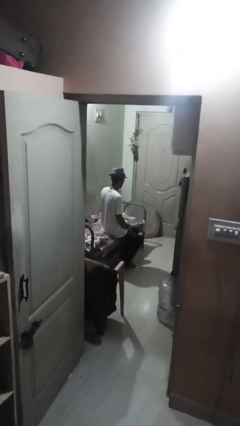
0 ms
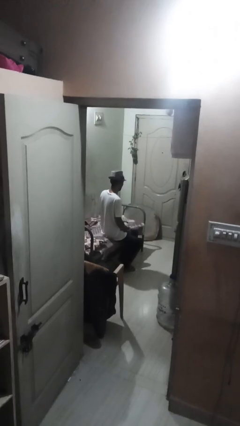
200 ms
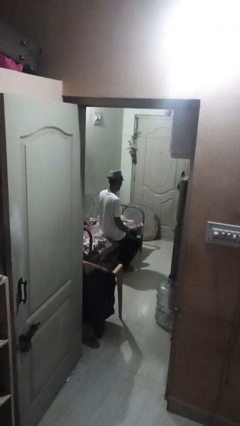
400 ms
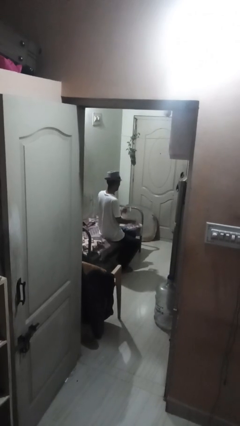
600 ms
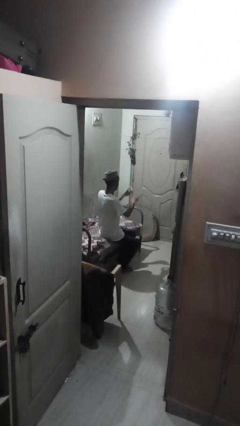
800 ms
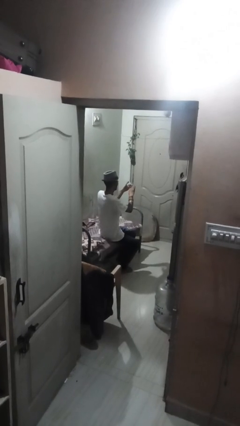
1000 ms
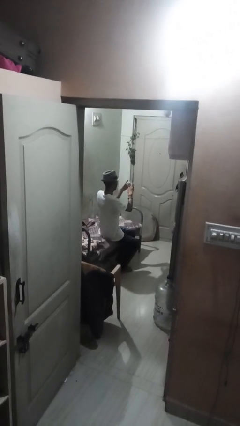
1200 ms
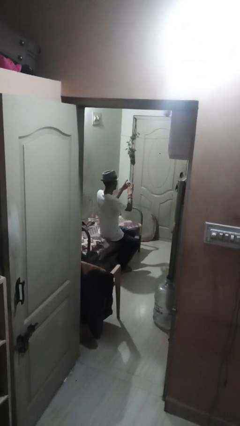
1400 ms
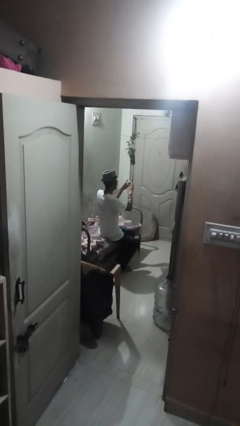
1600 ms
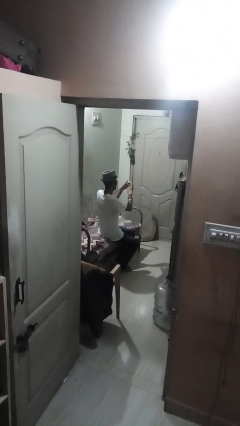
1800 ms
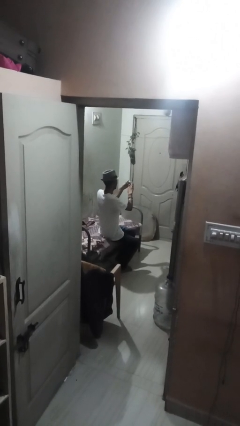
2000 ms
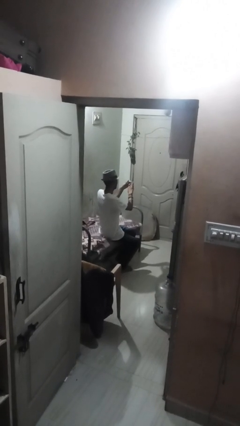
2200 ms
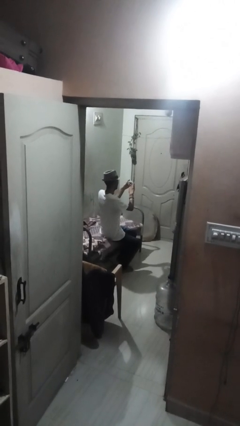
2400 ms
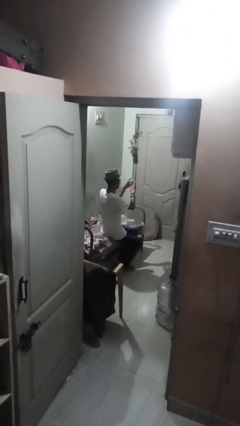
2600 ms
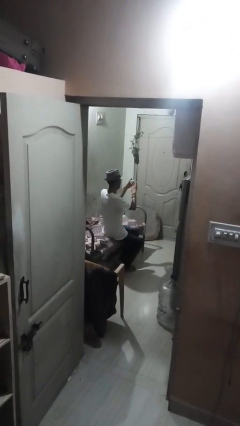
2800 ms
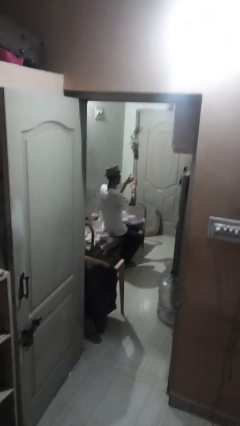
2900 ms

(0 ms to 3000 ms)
person clips fingernails

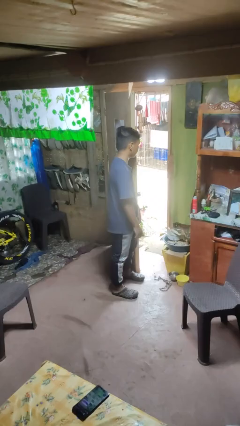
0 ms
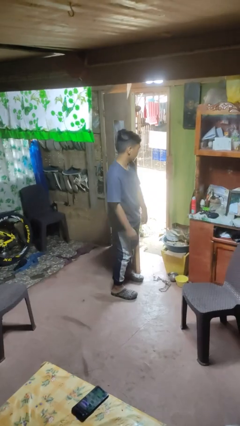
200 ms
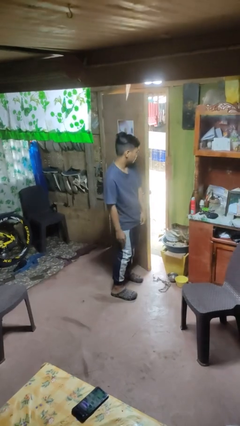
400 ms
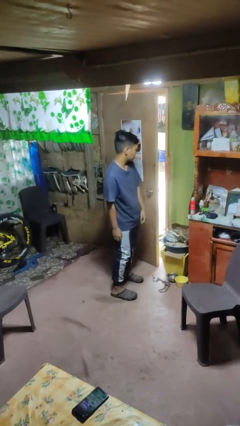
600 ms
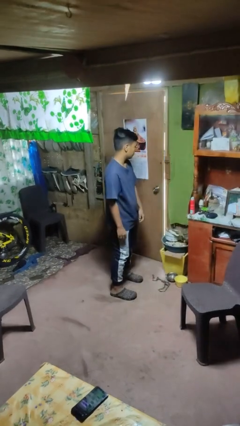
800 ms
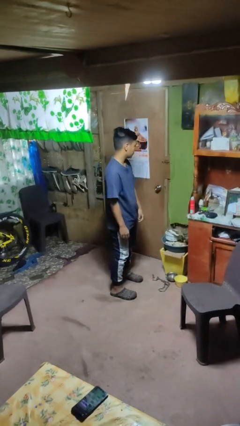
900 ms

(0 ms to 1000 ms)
person closes door with hip

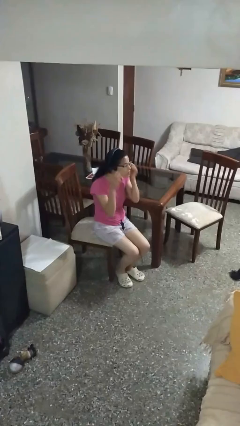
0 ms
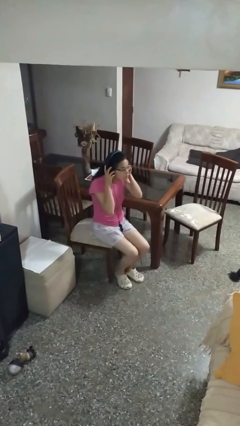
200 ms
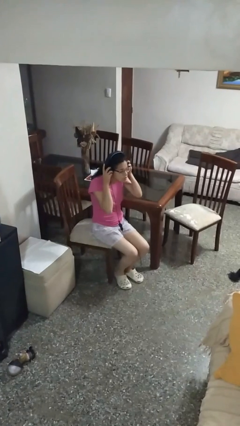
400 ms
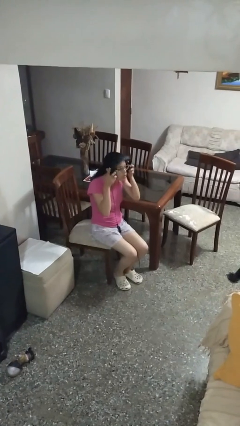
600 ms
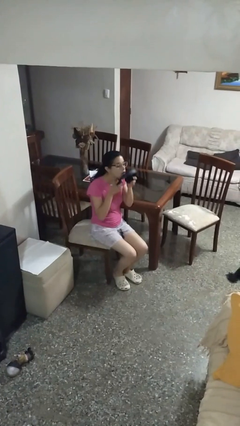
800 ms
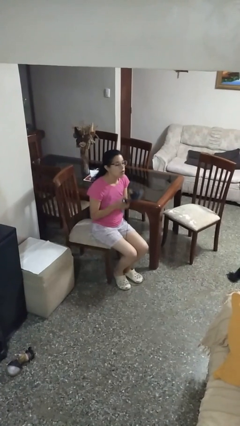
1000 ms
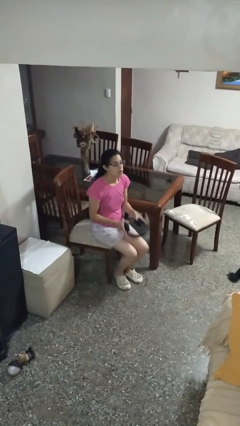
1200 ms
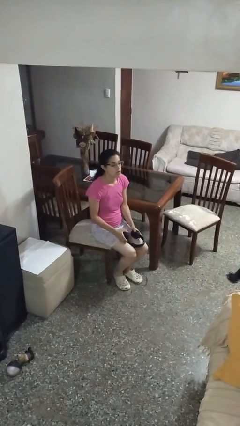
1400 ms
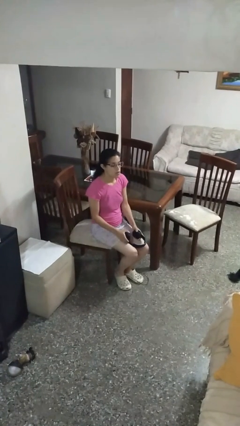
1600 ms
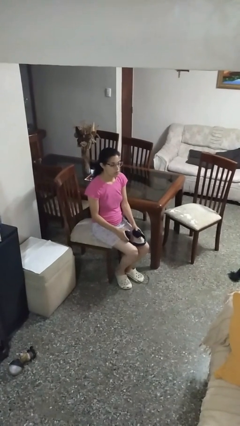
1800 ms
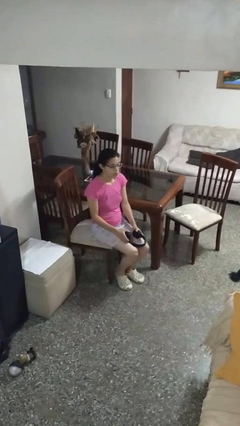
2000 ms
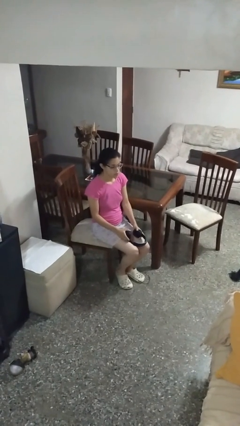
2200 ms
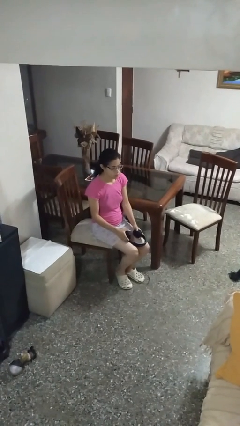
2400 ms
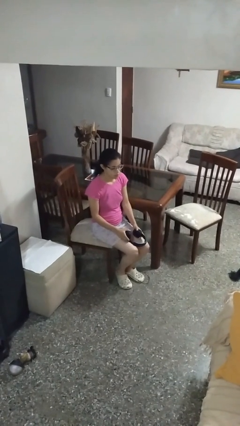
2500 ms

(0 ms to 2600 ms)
person takes off headphones

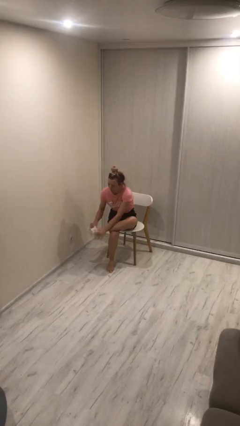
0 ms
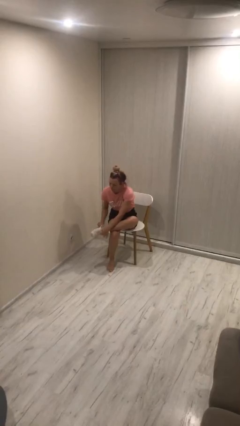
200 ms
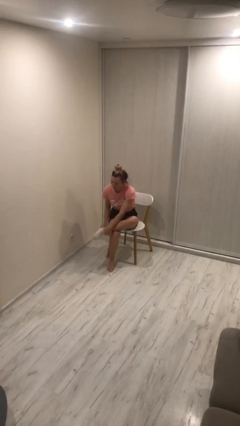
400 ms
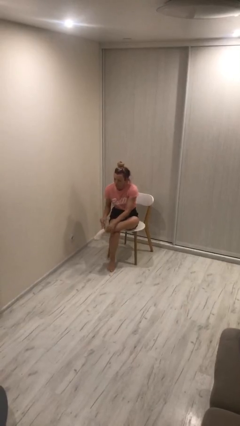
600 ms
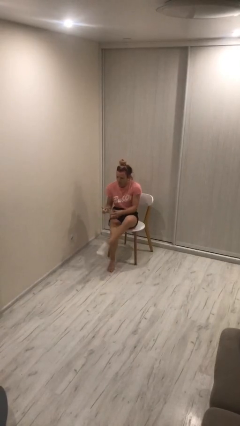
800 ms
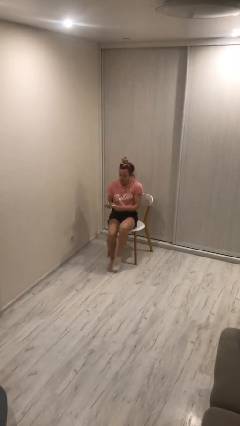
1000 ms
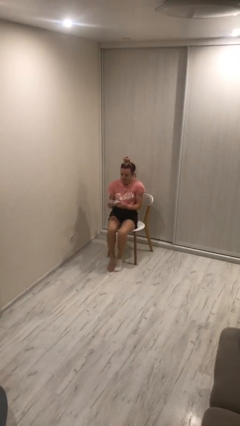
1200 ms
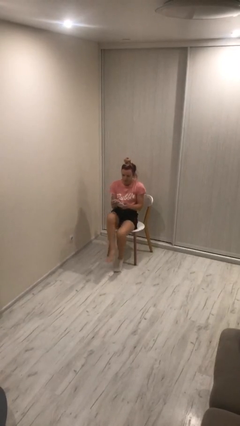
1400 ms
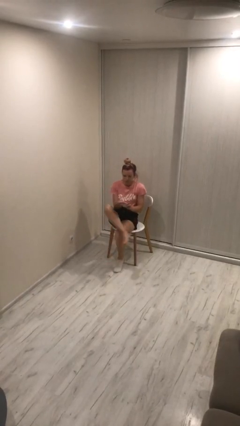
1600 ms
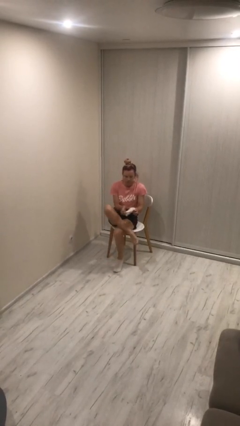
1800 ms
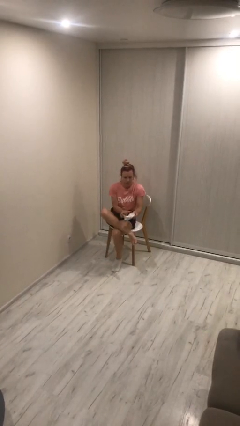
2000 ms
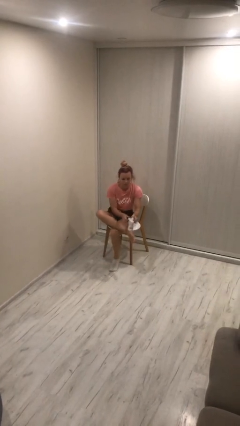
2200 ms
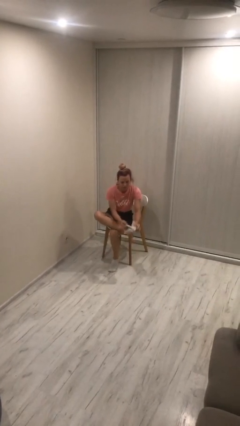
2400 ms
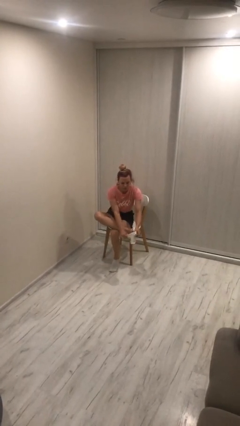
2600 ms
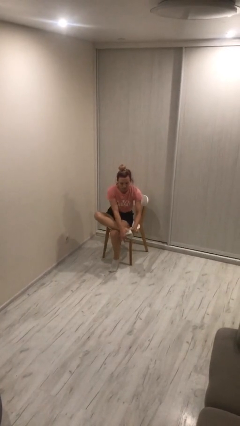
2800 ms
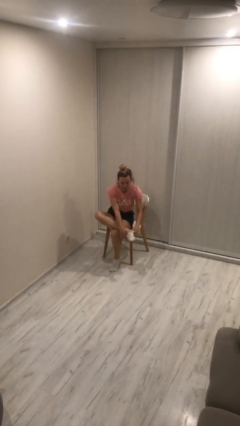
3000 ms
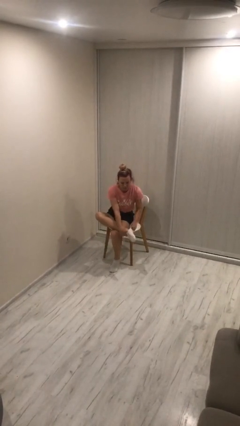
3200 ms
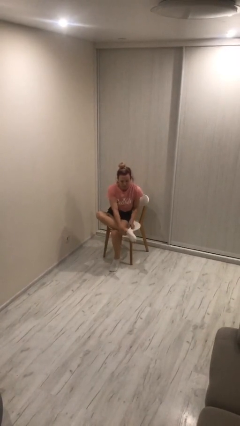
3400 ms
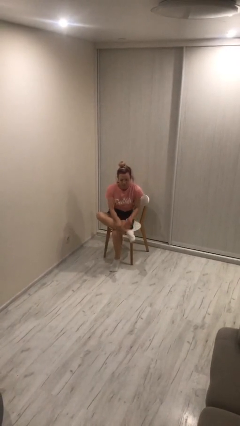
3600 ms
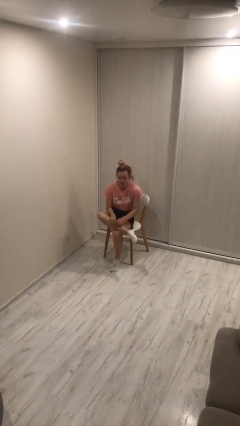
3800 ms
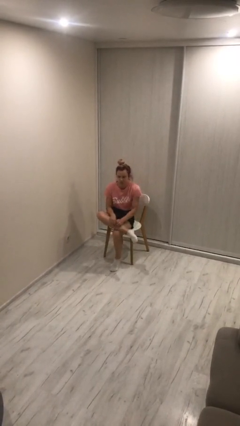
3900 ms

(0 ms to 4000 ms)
person puts on socks

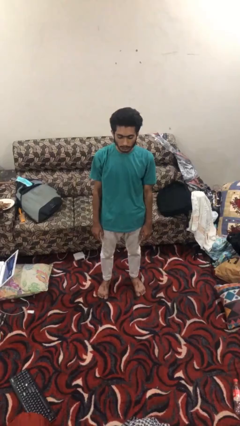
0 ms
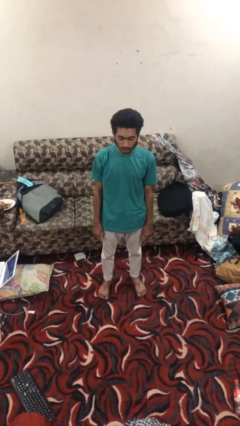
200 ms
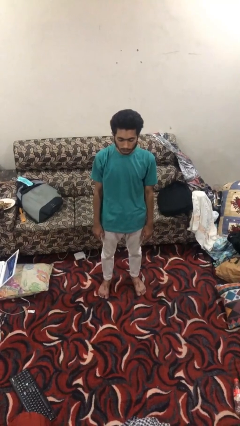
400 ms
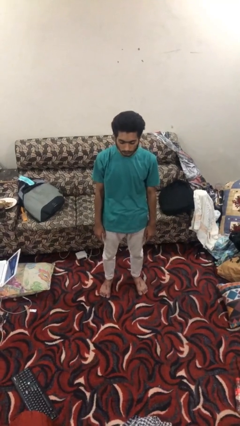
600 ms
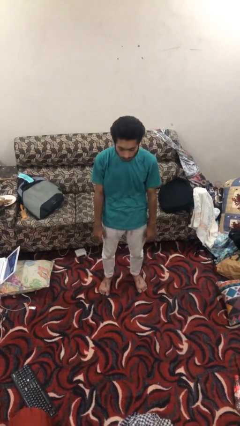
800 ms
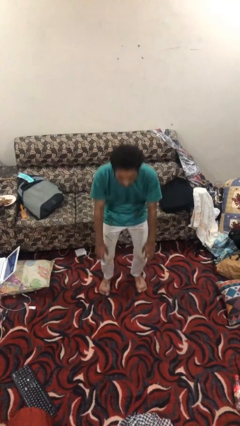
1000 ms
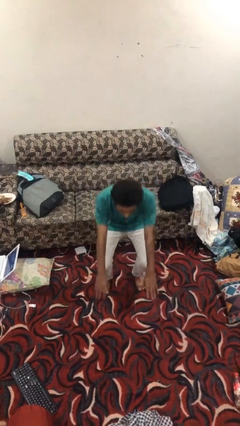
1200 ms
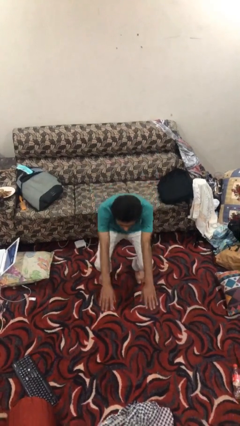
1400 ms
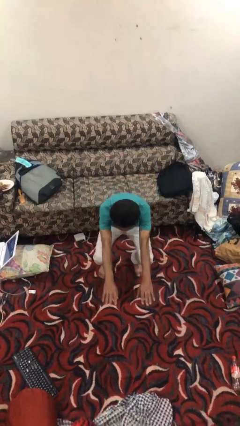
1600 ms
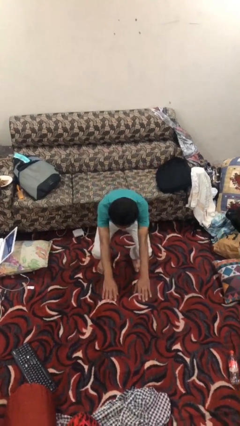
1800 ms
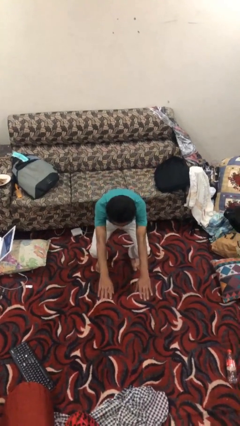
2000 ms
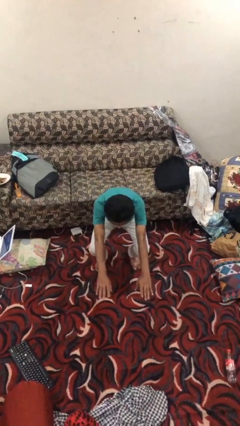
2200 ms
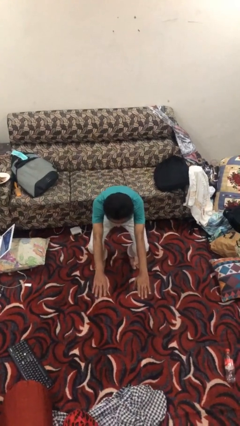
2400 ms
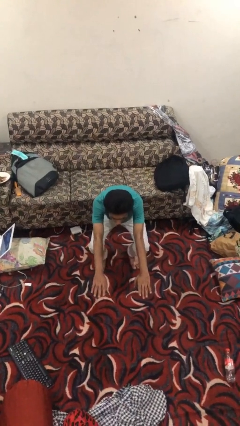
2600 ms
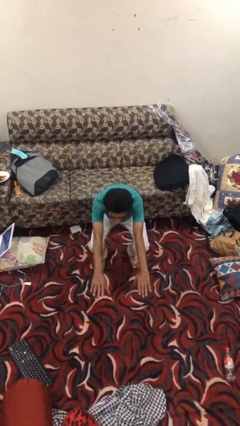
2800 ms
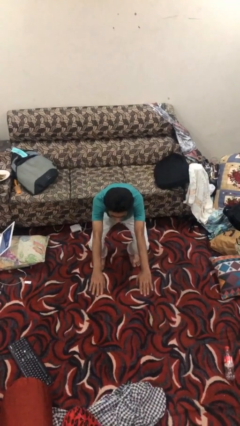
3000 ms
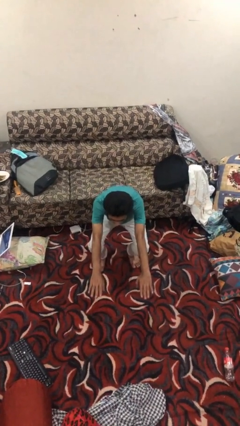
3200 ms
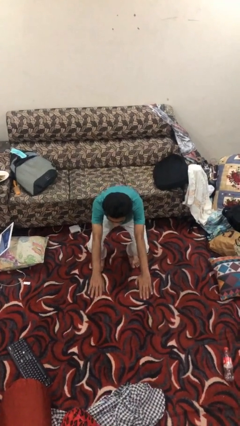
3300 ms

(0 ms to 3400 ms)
person squats

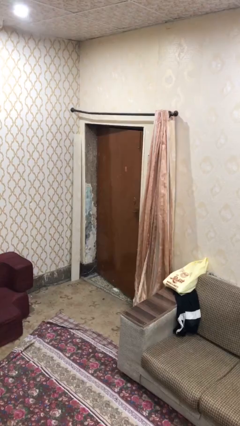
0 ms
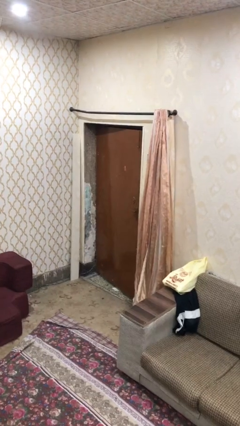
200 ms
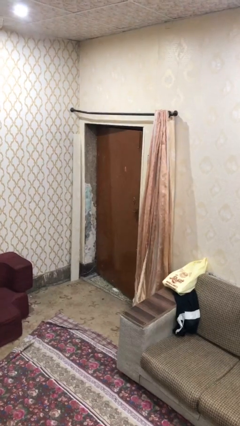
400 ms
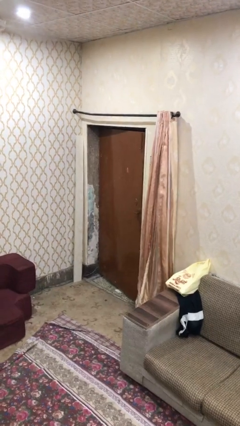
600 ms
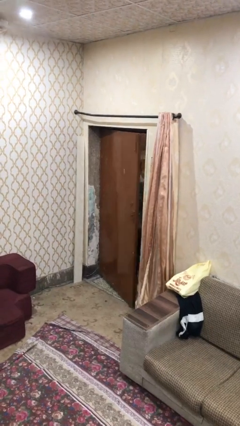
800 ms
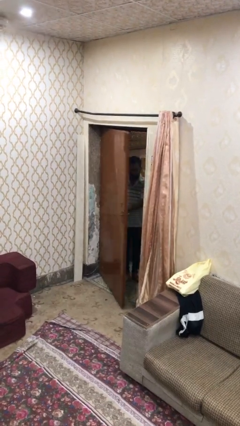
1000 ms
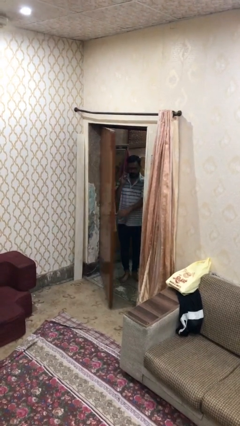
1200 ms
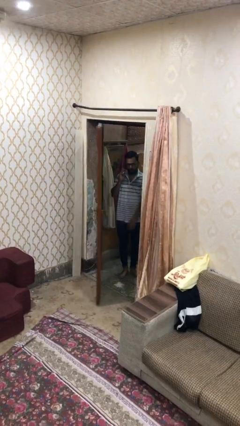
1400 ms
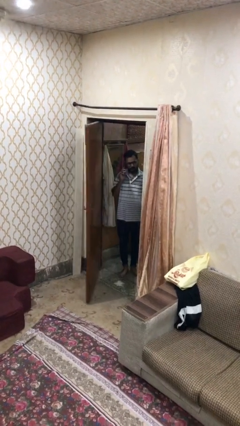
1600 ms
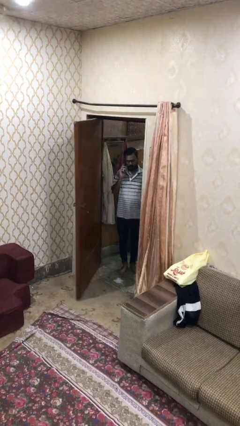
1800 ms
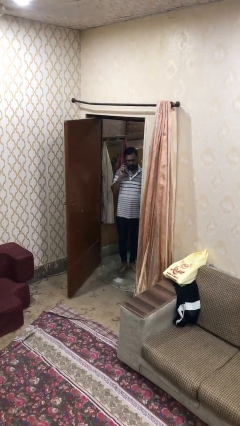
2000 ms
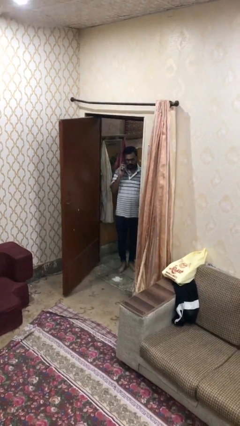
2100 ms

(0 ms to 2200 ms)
person opens facility door

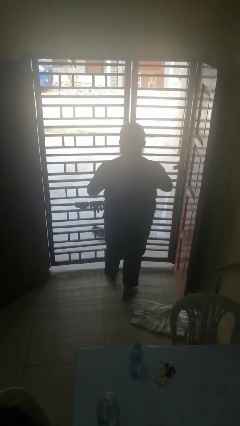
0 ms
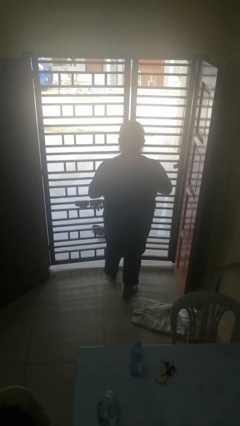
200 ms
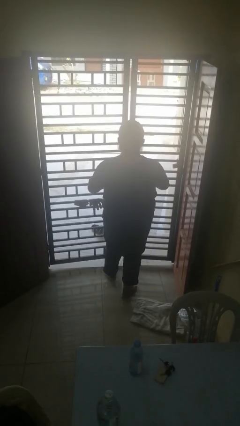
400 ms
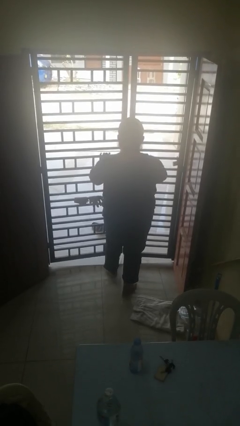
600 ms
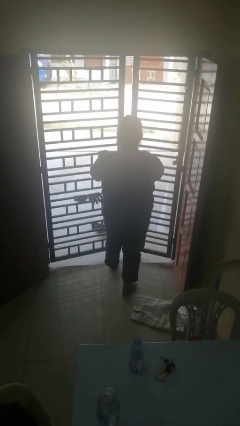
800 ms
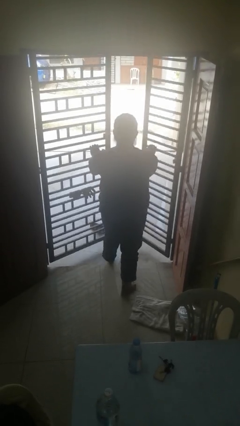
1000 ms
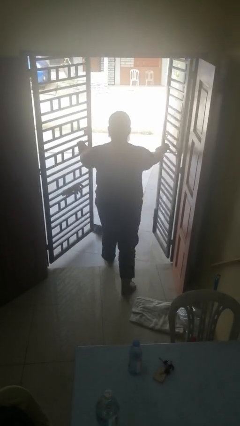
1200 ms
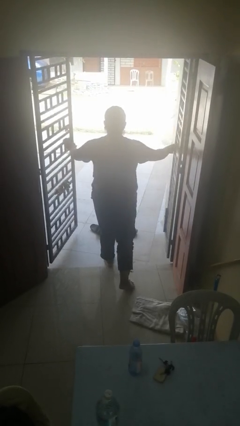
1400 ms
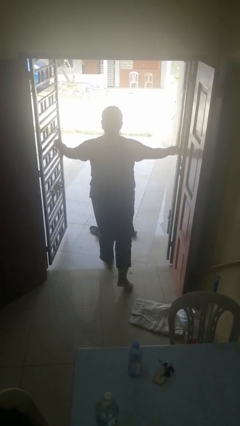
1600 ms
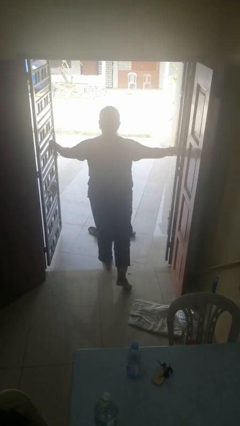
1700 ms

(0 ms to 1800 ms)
person opens gate
